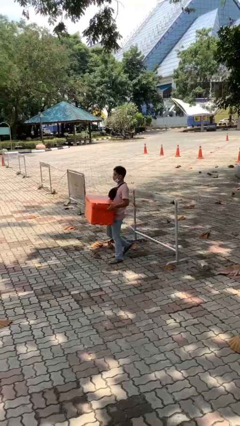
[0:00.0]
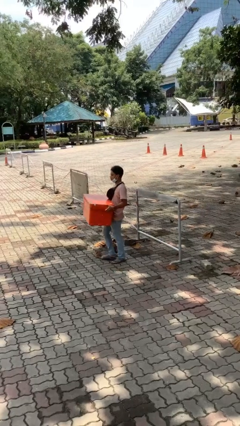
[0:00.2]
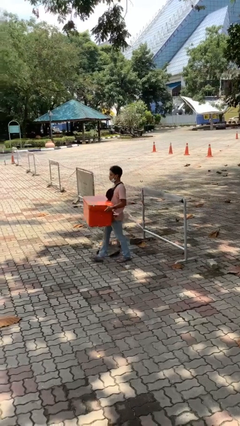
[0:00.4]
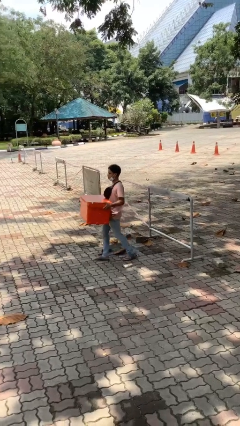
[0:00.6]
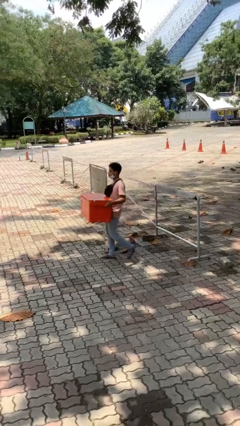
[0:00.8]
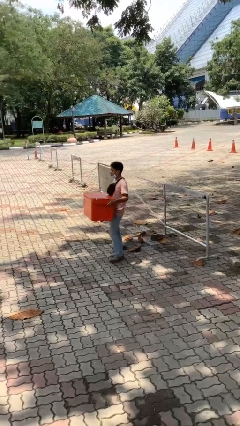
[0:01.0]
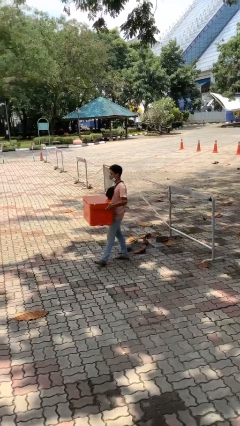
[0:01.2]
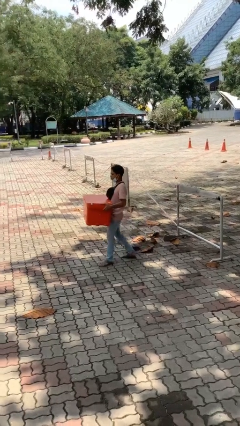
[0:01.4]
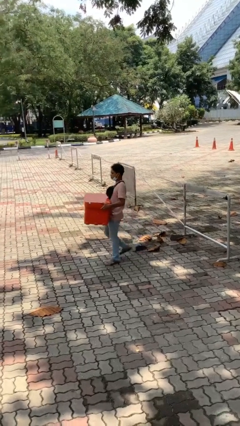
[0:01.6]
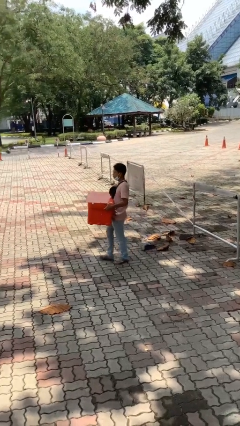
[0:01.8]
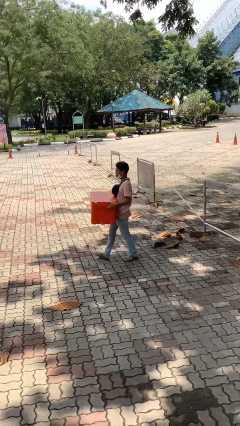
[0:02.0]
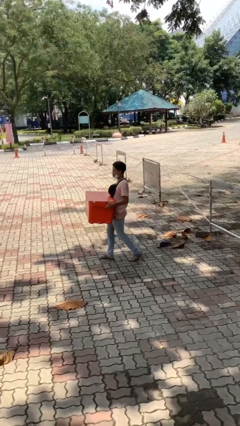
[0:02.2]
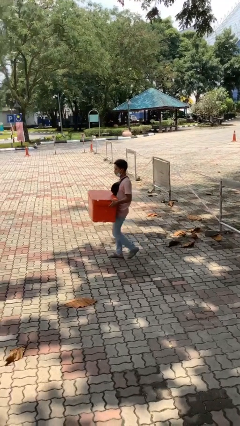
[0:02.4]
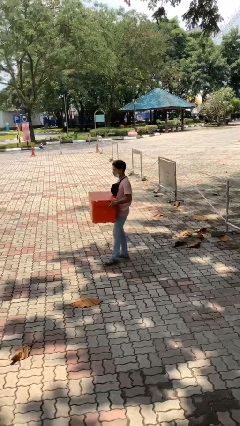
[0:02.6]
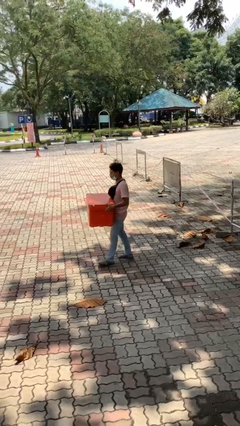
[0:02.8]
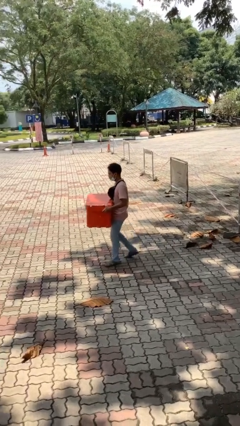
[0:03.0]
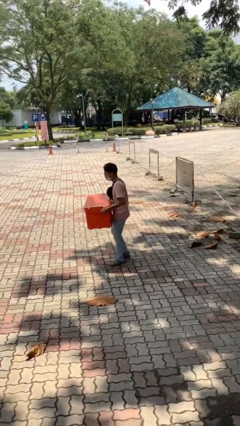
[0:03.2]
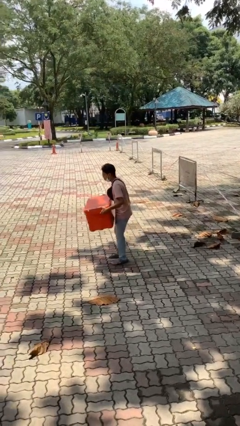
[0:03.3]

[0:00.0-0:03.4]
person carries heavy object

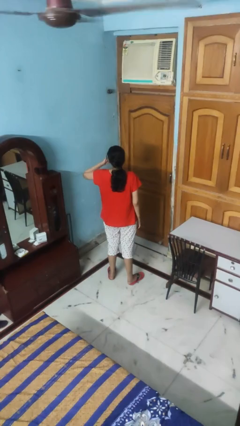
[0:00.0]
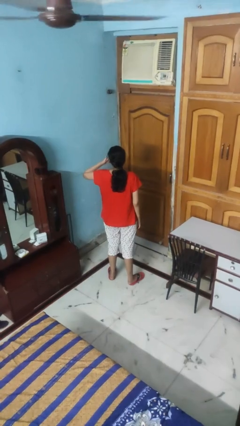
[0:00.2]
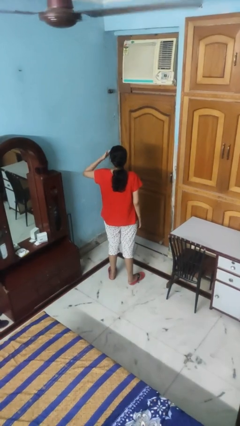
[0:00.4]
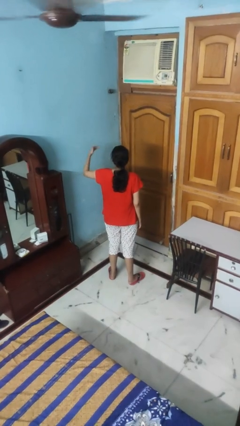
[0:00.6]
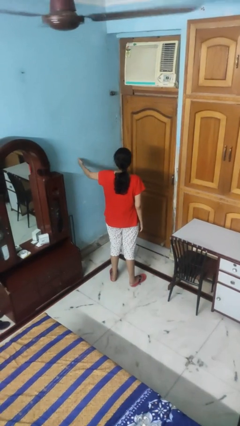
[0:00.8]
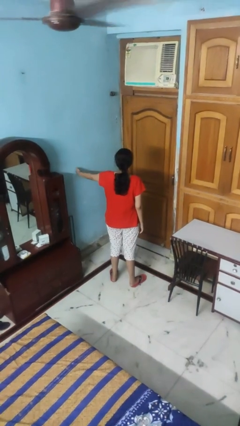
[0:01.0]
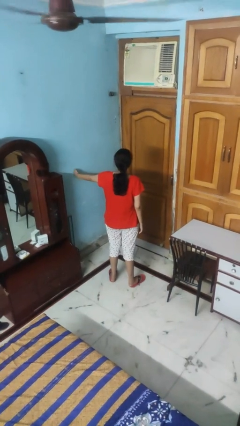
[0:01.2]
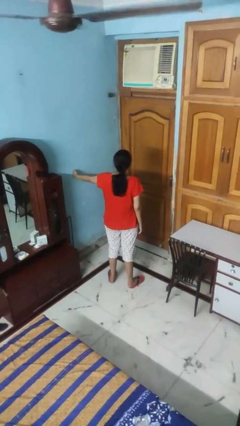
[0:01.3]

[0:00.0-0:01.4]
person gestures blow kiss

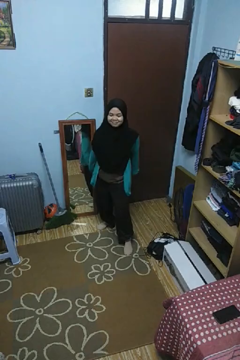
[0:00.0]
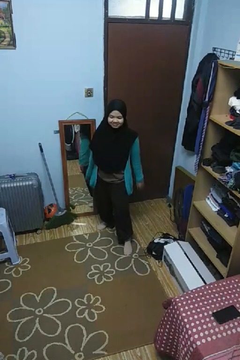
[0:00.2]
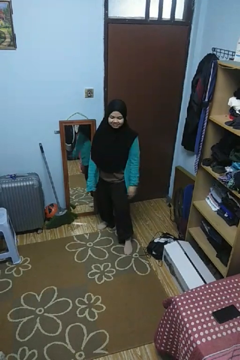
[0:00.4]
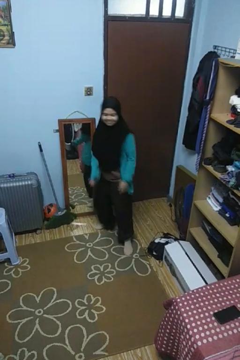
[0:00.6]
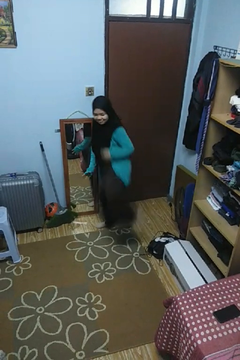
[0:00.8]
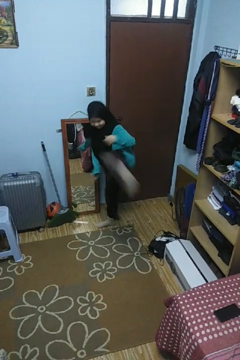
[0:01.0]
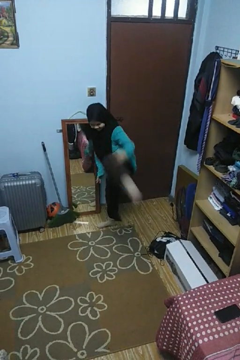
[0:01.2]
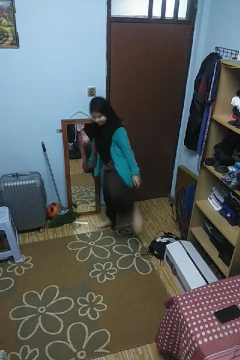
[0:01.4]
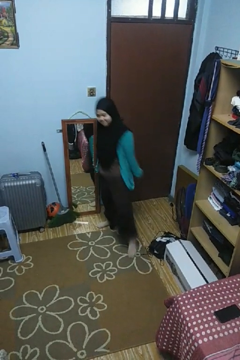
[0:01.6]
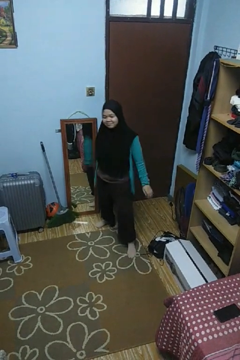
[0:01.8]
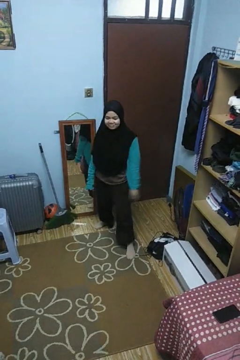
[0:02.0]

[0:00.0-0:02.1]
person karate kicks

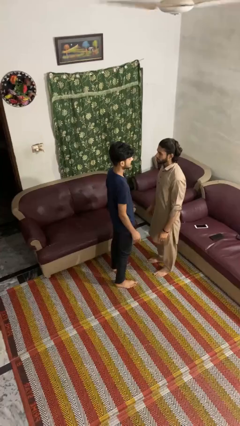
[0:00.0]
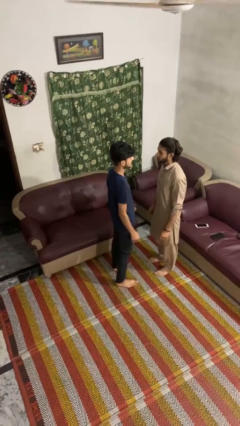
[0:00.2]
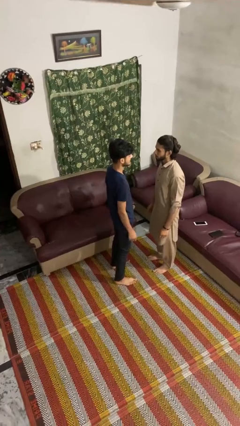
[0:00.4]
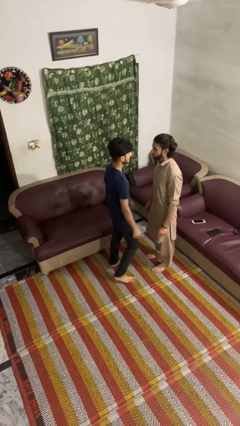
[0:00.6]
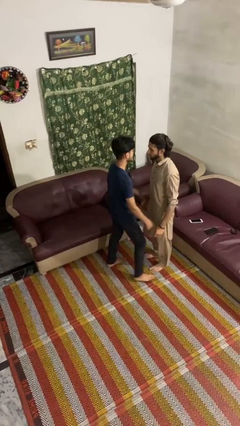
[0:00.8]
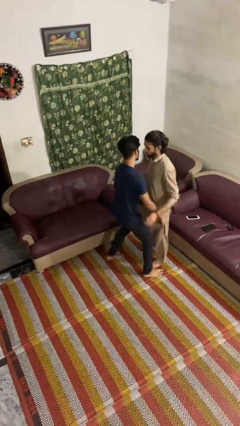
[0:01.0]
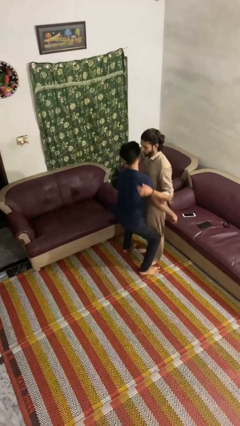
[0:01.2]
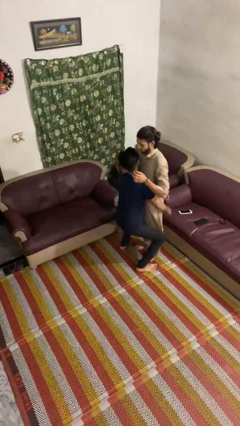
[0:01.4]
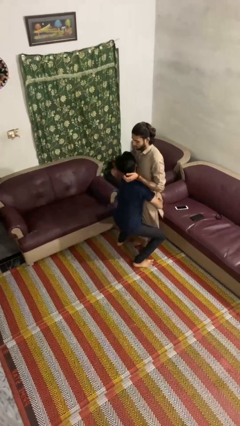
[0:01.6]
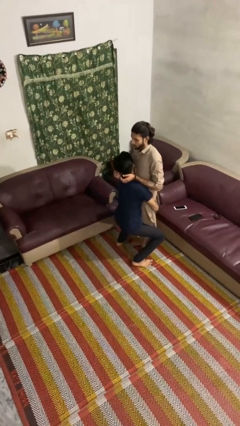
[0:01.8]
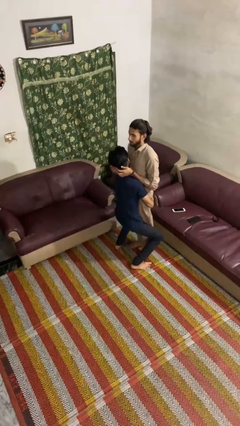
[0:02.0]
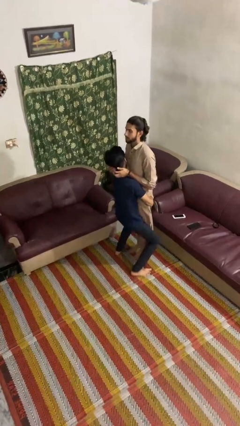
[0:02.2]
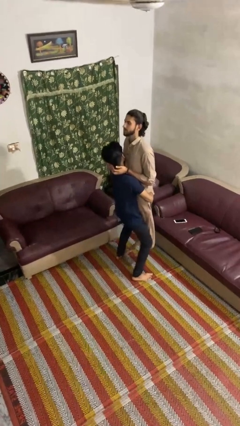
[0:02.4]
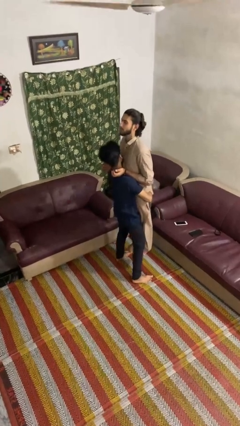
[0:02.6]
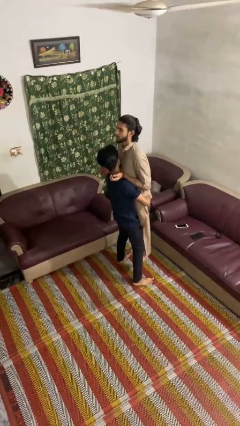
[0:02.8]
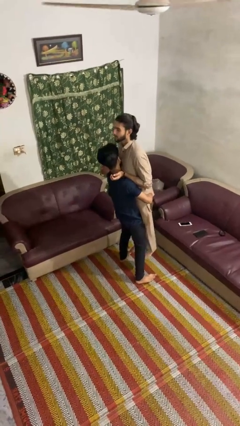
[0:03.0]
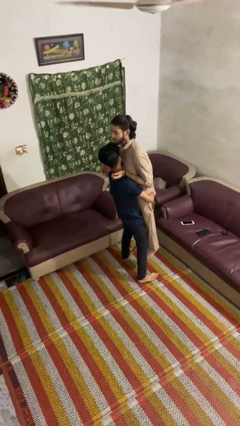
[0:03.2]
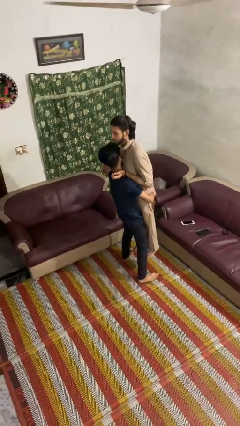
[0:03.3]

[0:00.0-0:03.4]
person picks up person

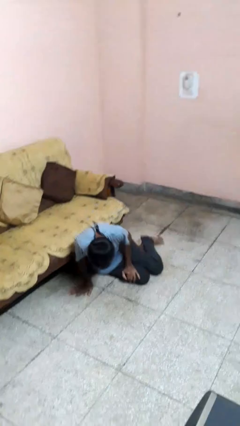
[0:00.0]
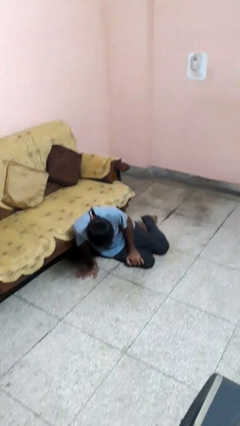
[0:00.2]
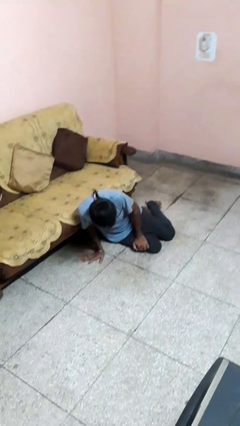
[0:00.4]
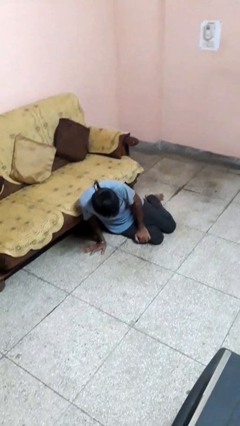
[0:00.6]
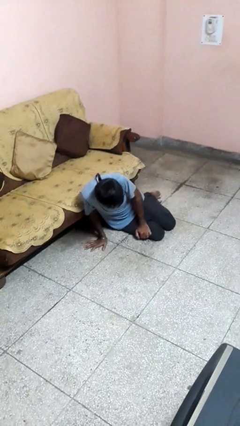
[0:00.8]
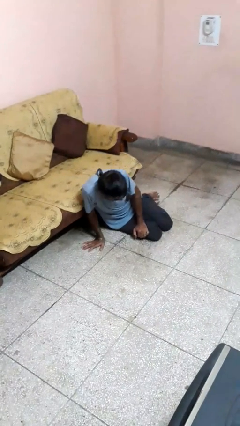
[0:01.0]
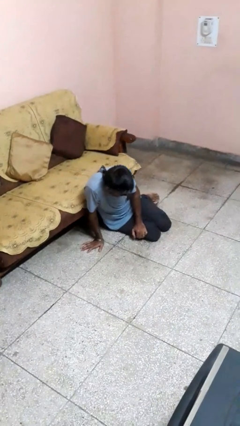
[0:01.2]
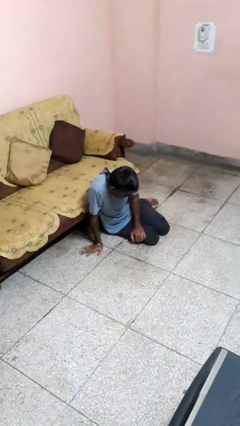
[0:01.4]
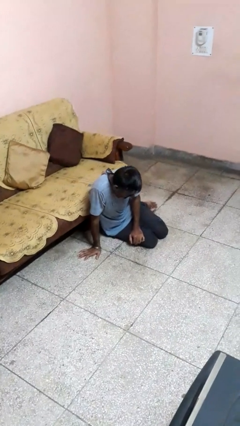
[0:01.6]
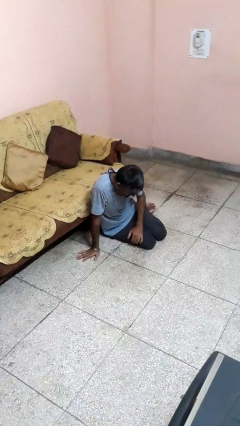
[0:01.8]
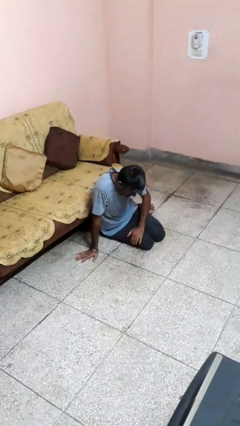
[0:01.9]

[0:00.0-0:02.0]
person lies down on floor

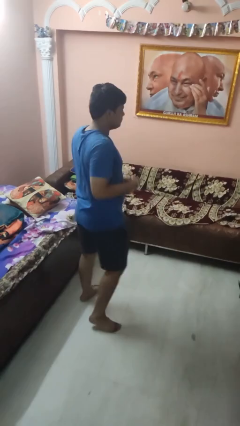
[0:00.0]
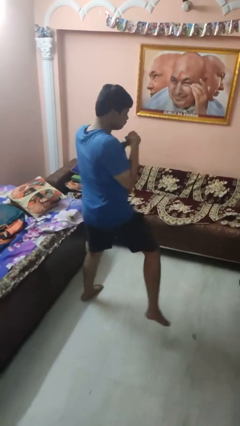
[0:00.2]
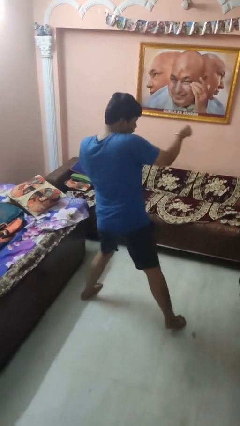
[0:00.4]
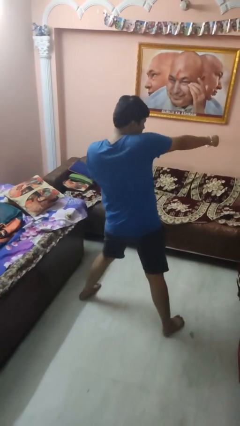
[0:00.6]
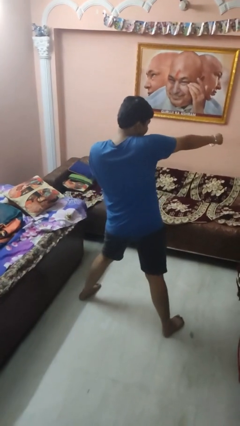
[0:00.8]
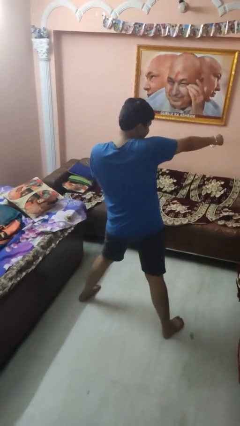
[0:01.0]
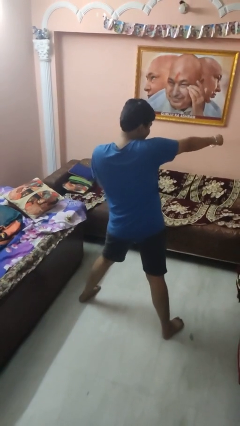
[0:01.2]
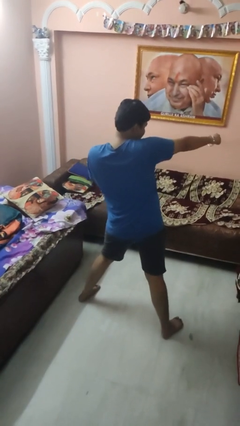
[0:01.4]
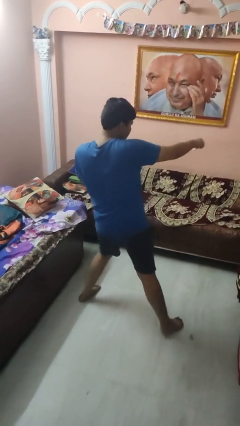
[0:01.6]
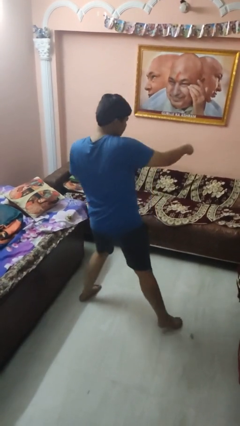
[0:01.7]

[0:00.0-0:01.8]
person punches

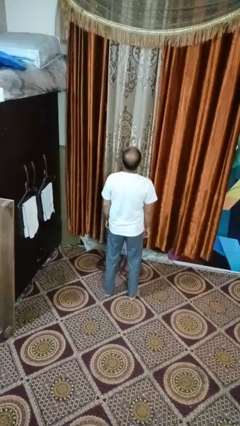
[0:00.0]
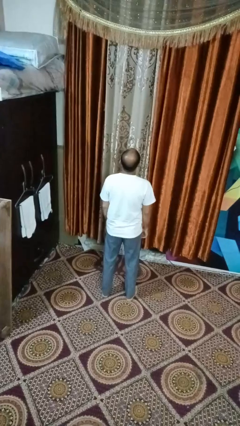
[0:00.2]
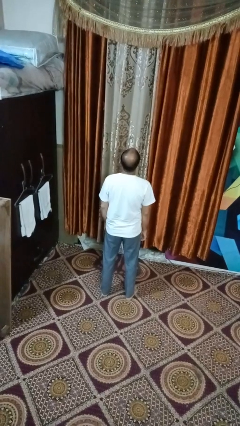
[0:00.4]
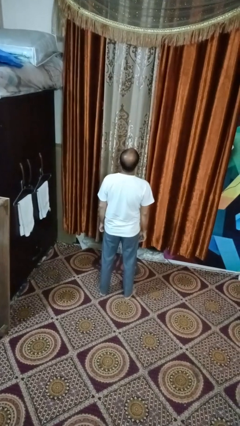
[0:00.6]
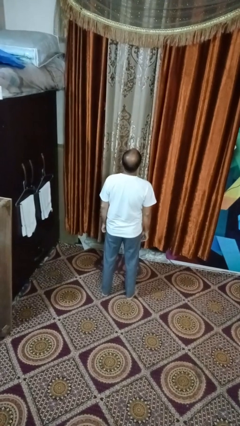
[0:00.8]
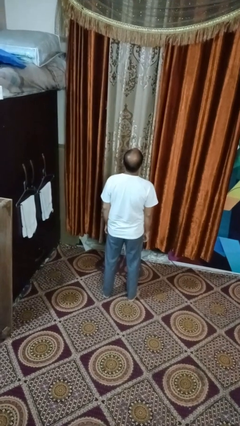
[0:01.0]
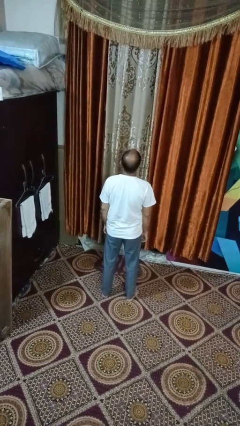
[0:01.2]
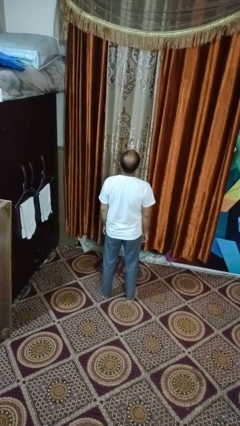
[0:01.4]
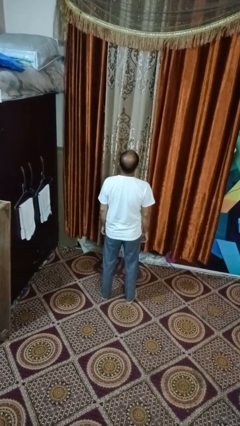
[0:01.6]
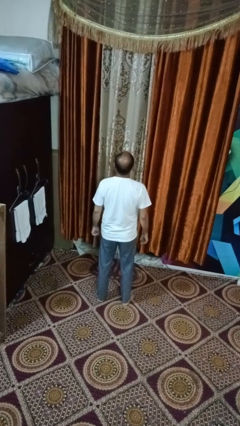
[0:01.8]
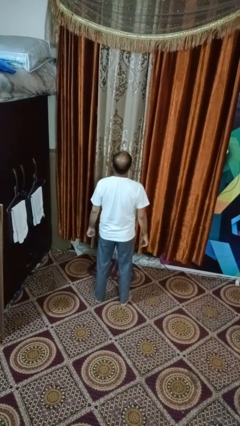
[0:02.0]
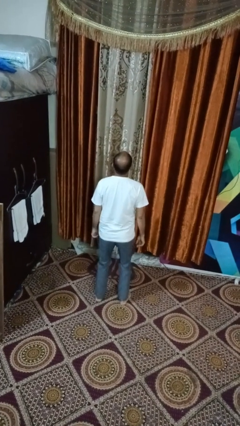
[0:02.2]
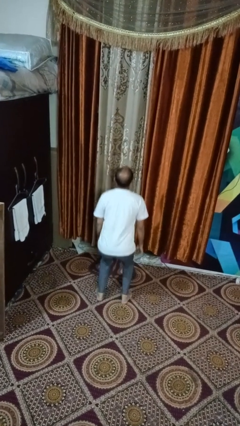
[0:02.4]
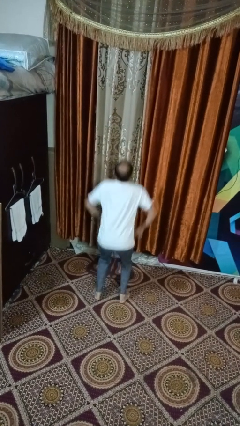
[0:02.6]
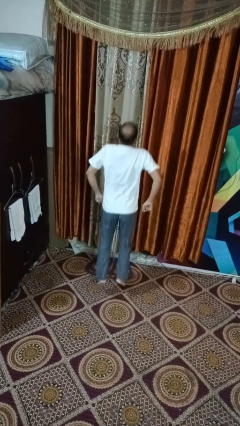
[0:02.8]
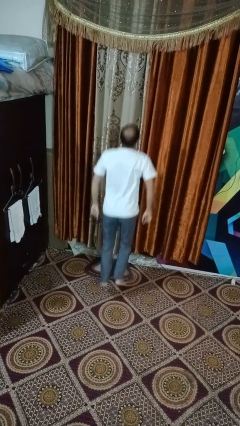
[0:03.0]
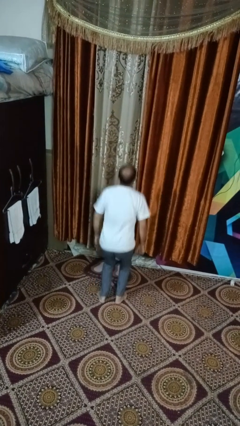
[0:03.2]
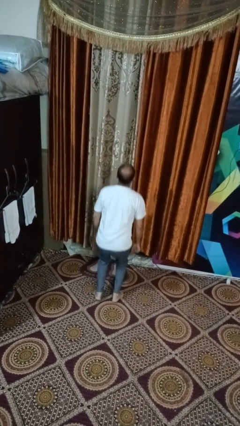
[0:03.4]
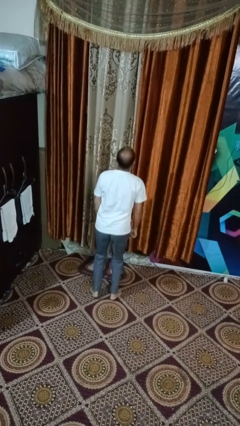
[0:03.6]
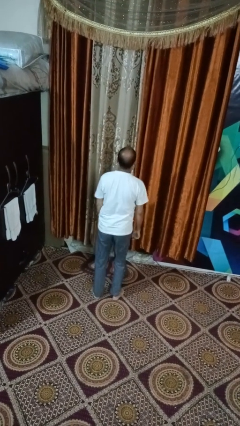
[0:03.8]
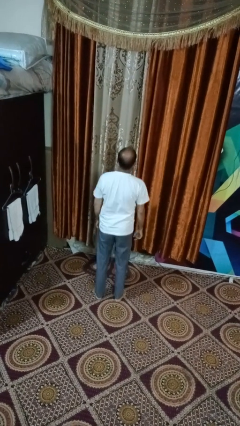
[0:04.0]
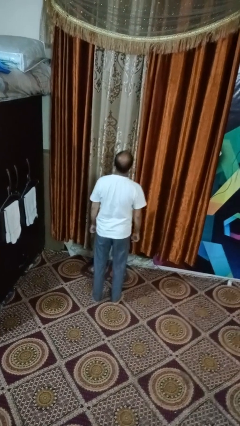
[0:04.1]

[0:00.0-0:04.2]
person jumps
